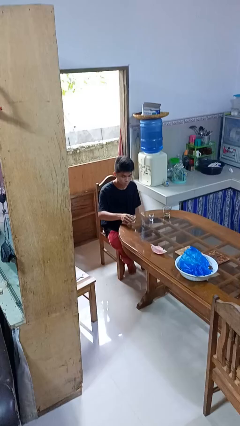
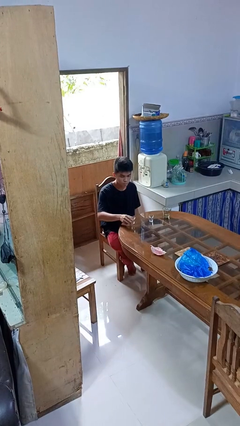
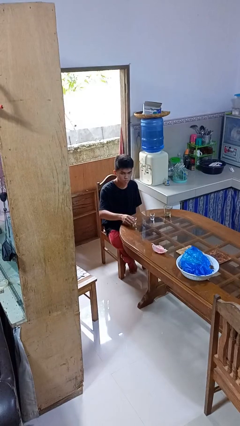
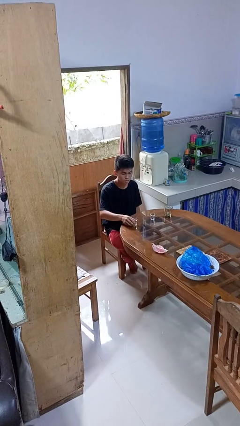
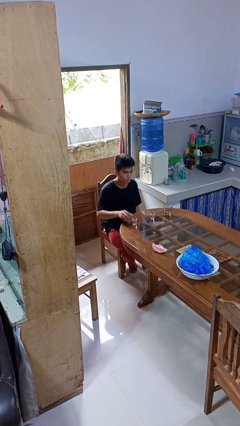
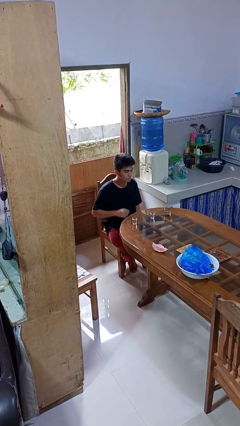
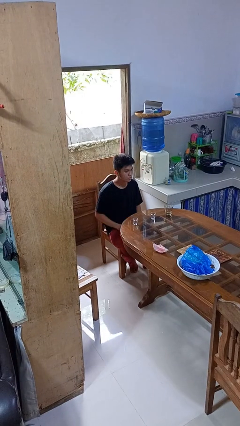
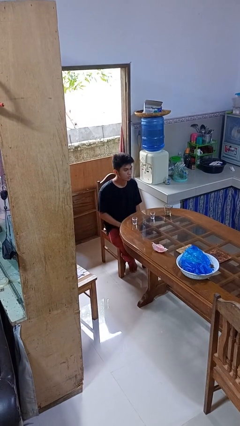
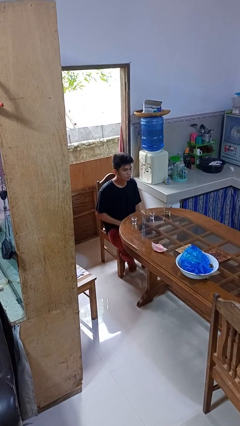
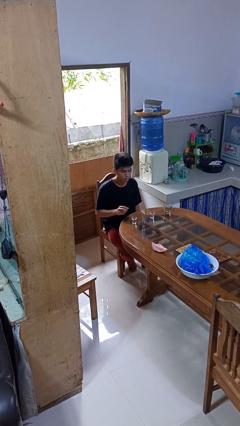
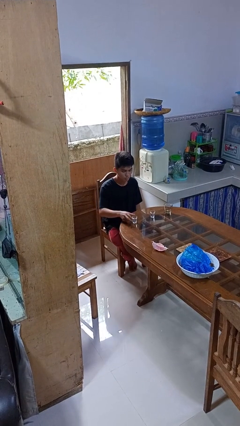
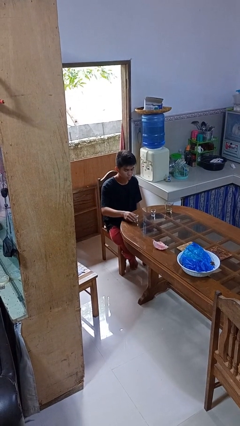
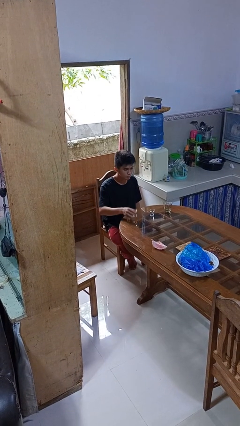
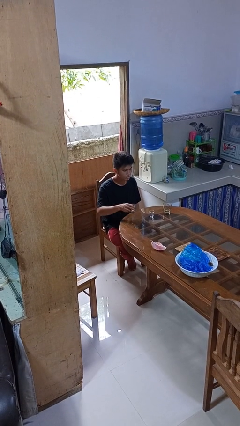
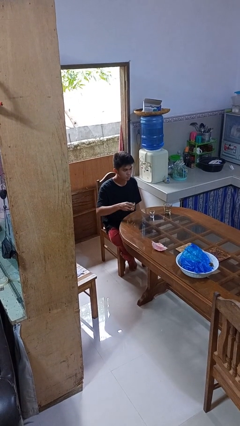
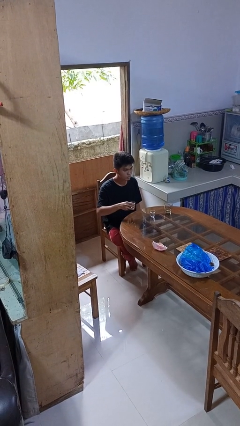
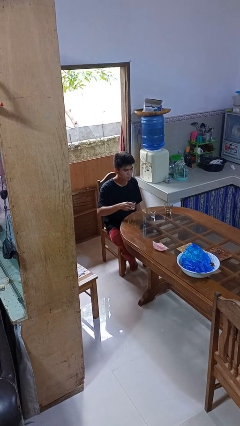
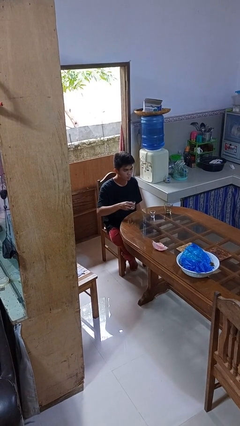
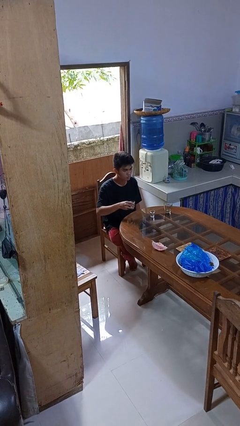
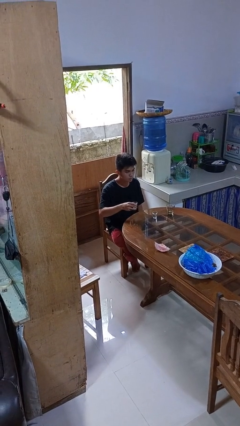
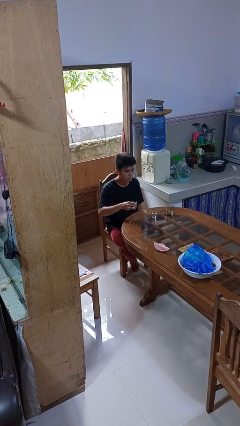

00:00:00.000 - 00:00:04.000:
person picks up object from table

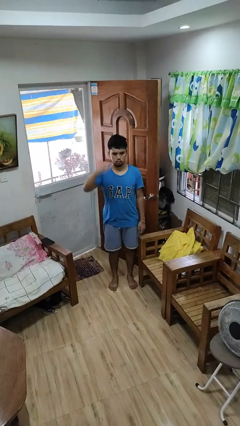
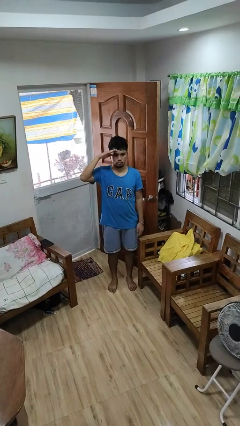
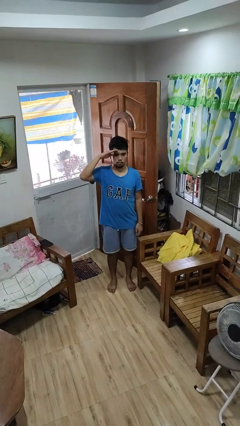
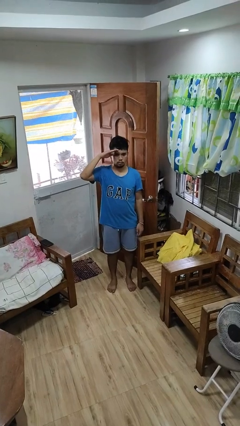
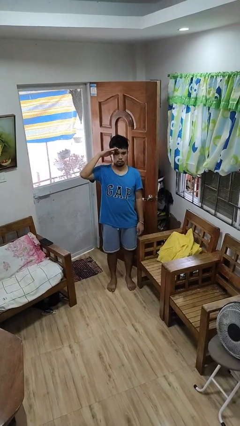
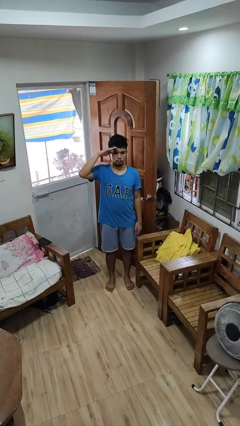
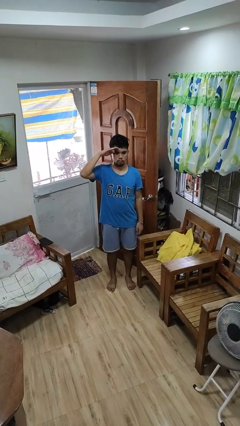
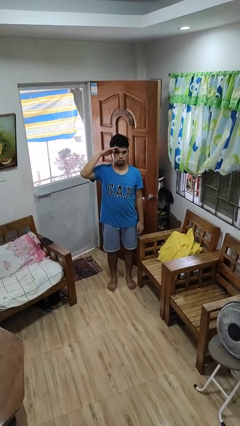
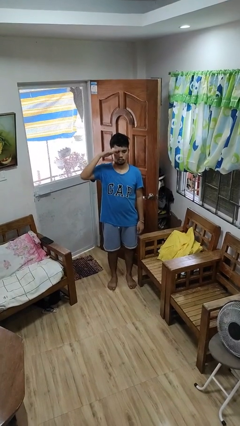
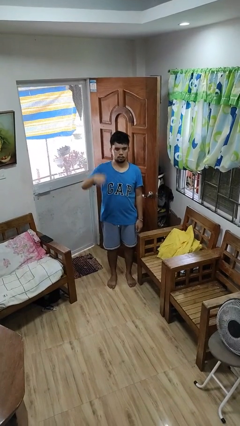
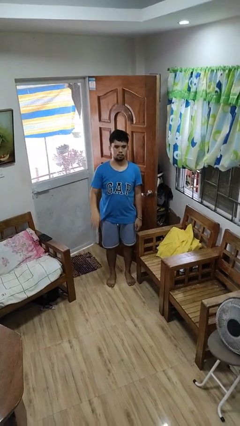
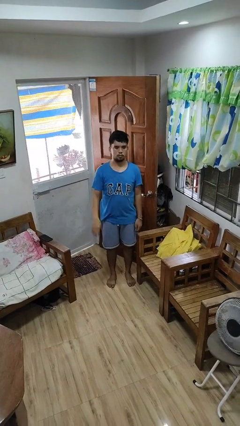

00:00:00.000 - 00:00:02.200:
person salutes

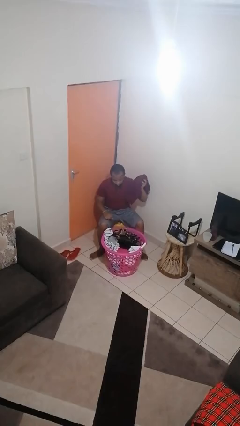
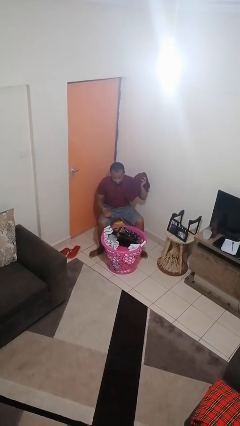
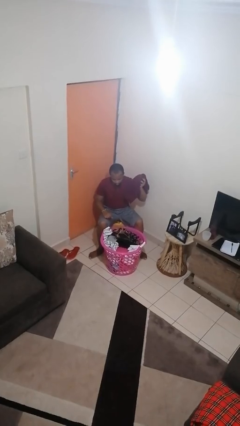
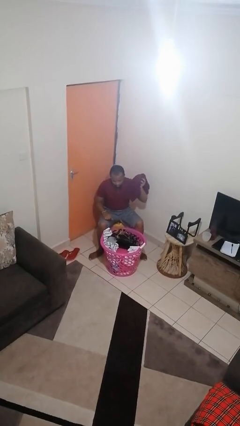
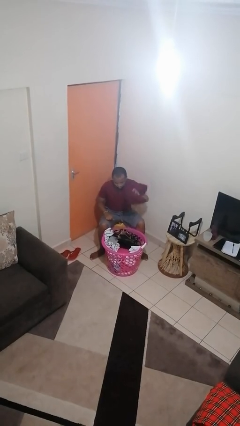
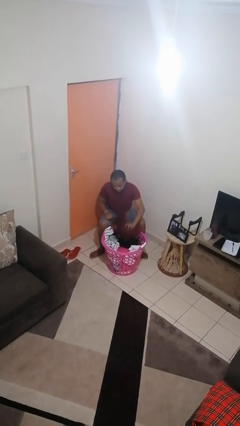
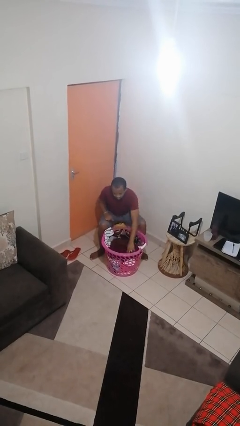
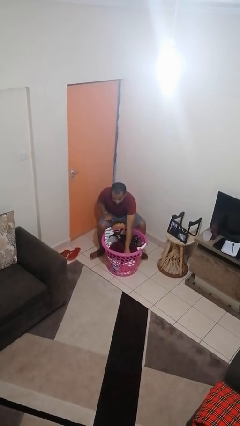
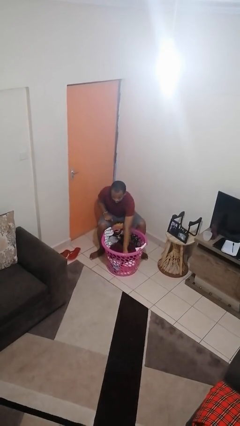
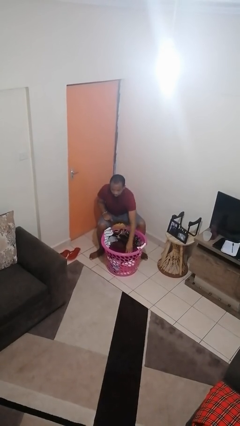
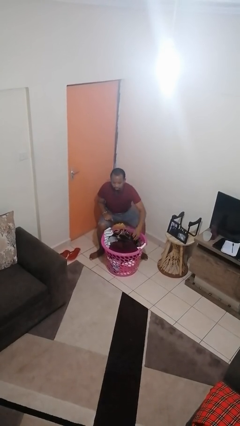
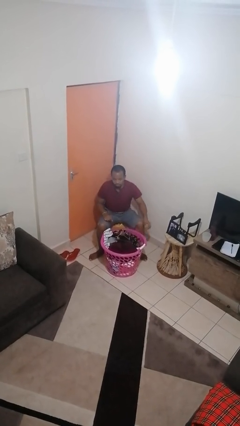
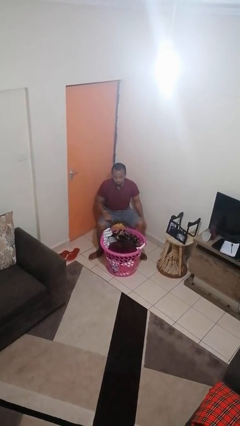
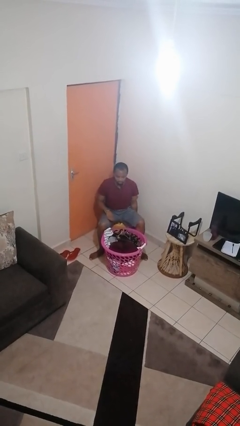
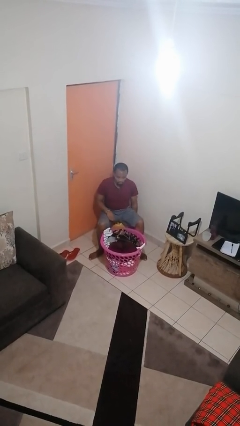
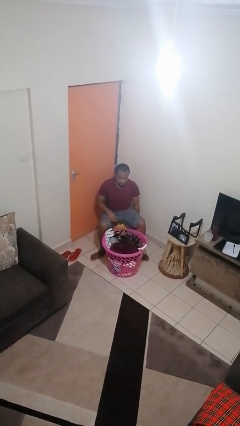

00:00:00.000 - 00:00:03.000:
person puts object into basket

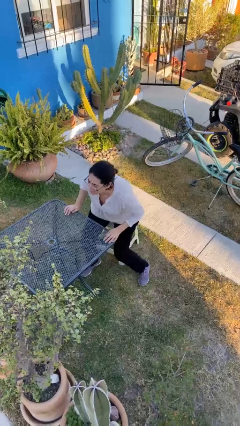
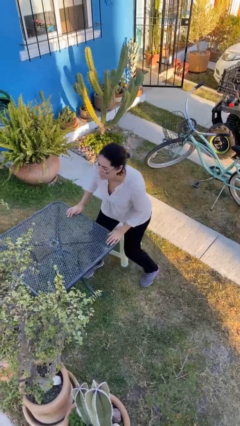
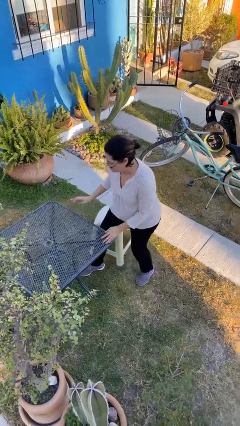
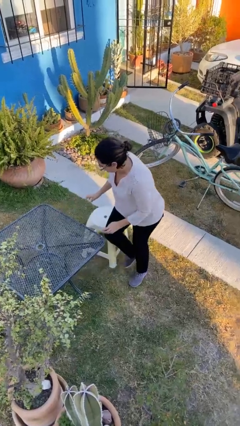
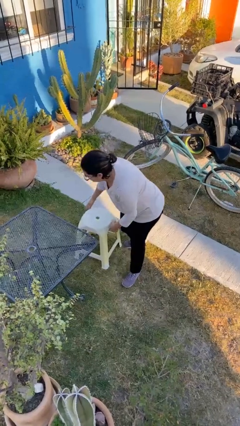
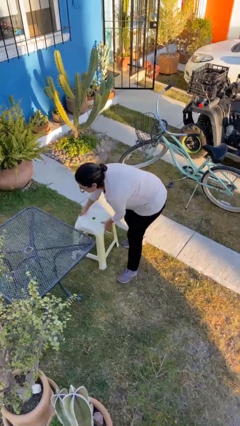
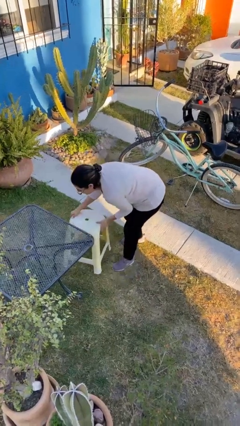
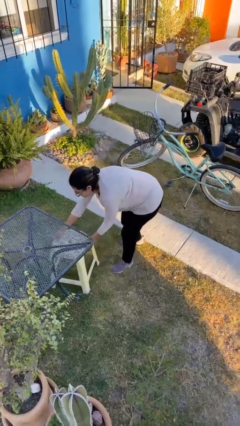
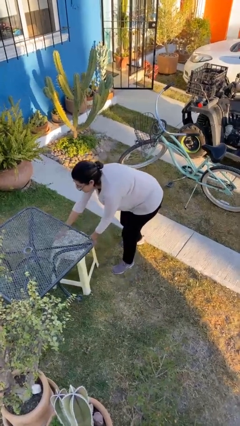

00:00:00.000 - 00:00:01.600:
person stands up

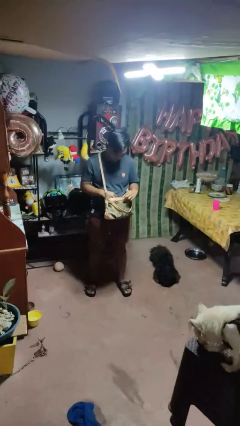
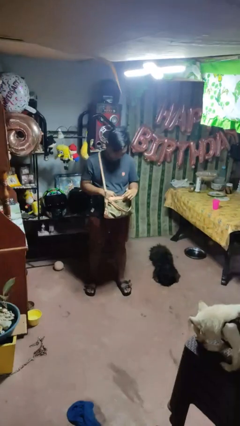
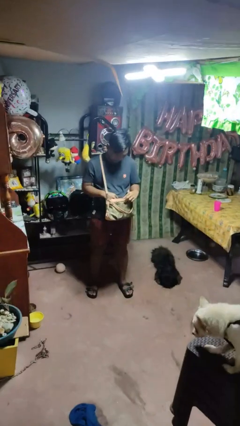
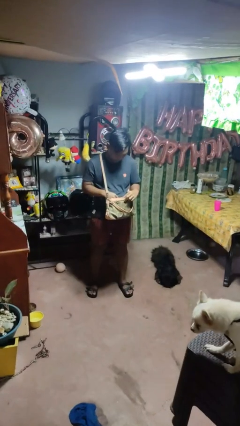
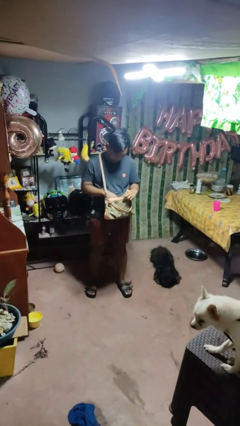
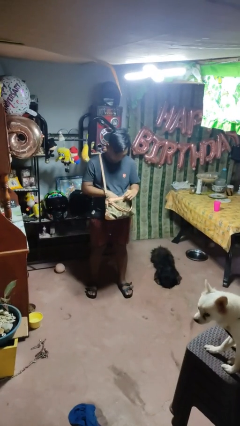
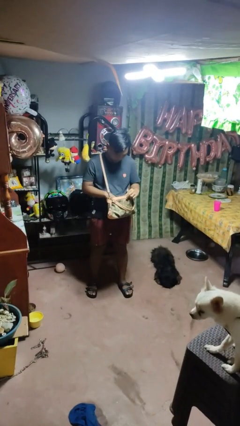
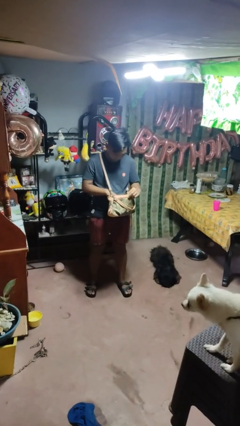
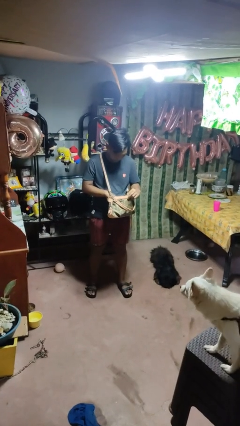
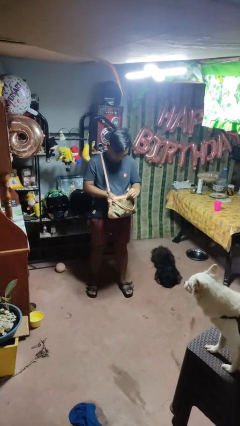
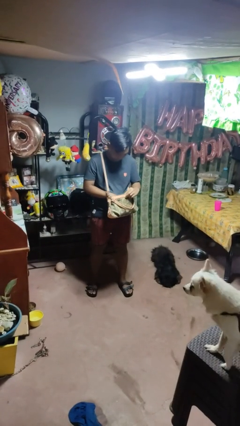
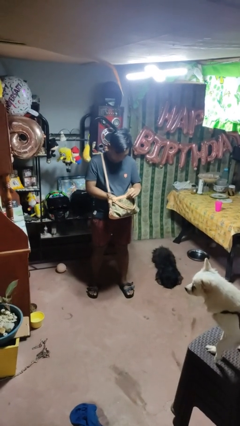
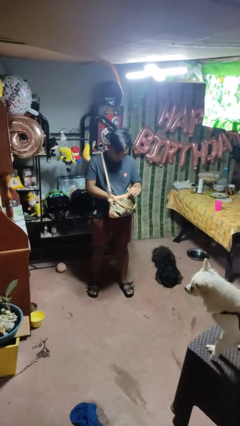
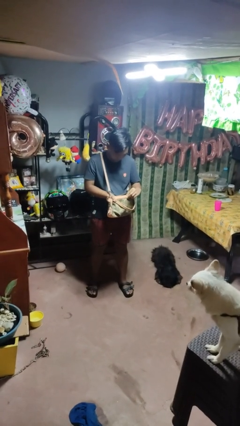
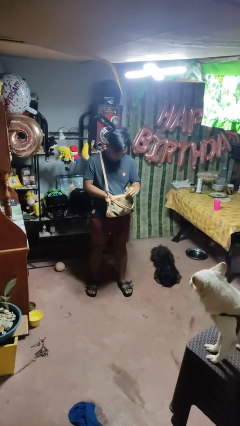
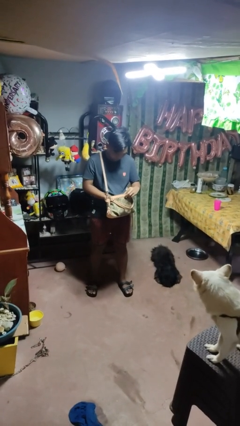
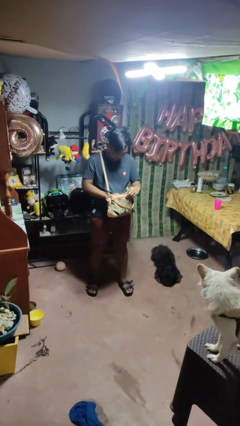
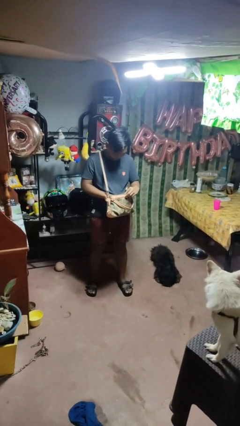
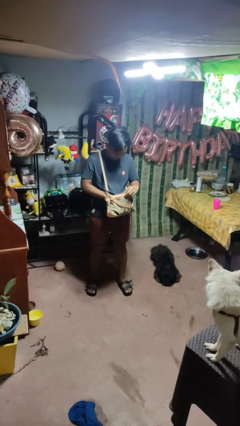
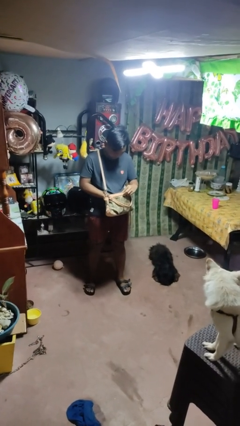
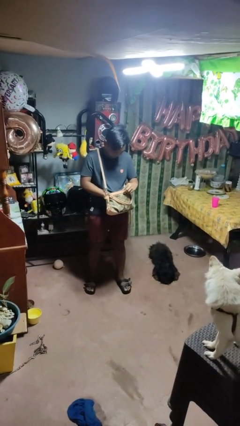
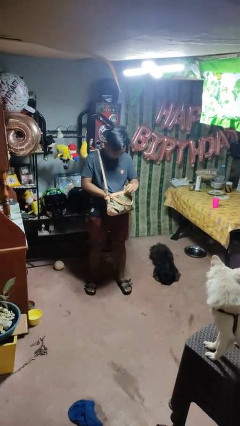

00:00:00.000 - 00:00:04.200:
person searches in purse

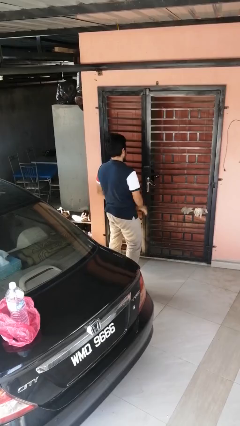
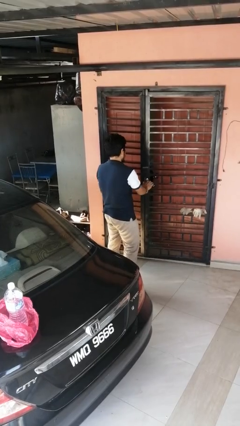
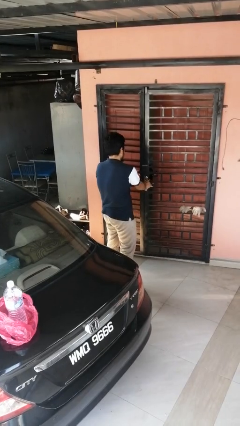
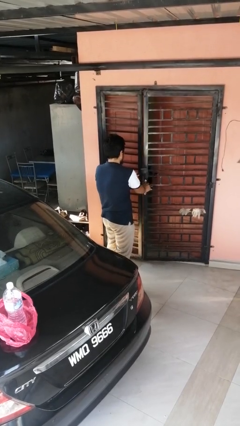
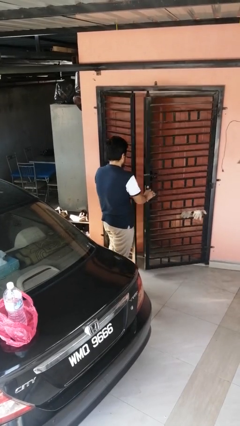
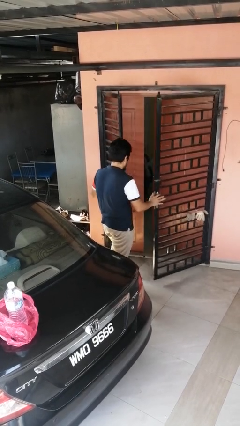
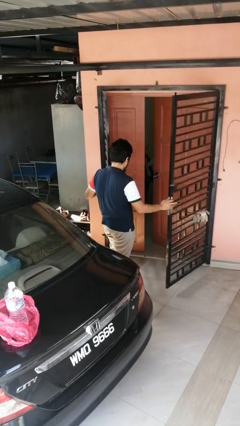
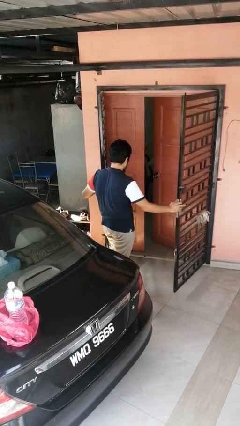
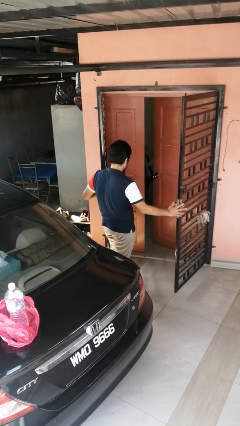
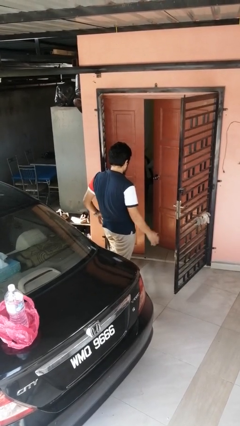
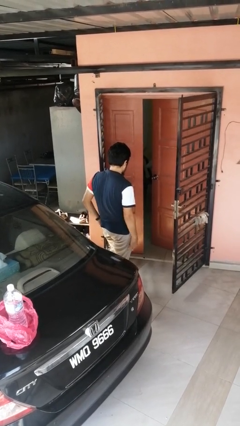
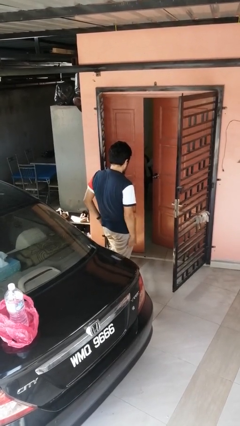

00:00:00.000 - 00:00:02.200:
person opens gate

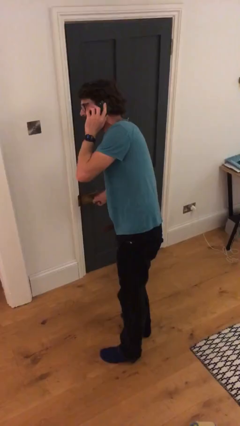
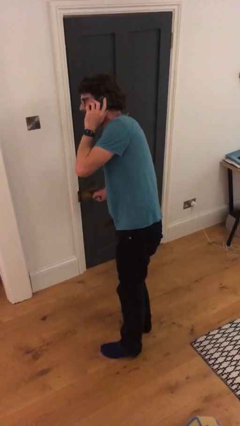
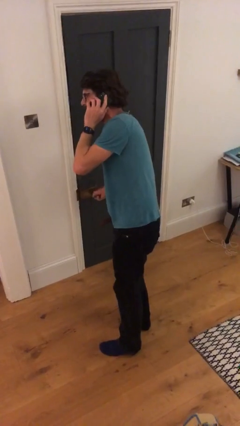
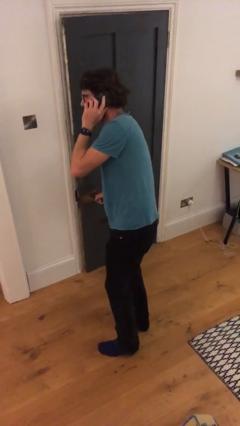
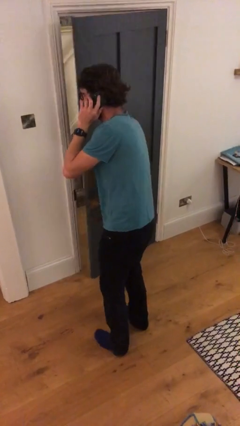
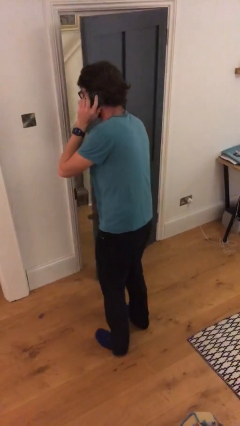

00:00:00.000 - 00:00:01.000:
person opens facility door
